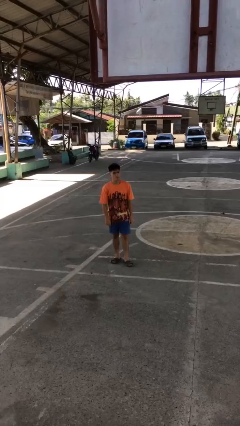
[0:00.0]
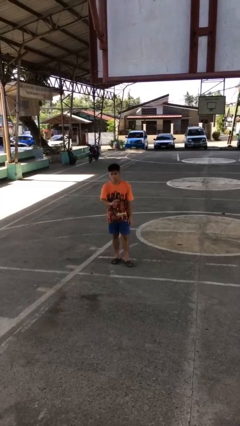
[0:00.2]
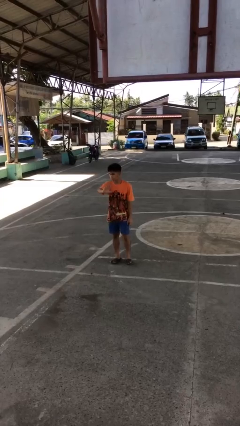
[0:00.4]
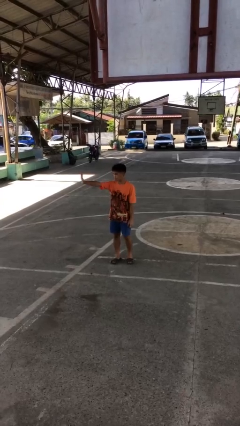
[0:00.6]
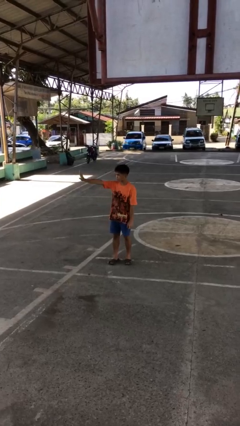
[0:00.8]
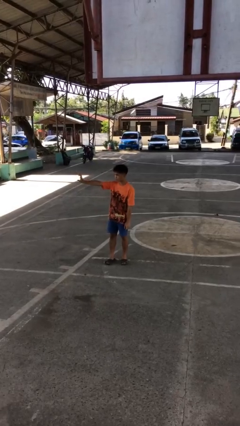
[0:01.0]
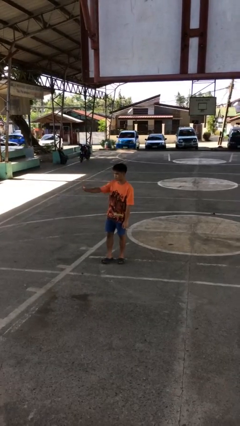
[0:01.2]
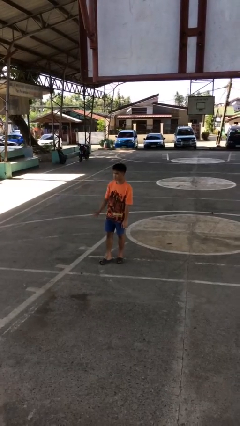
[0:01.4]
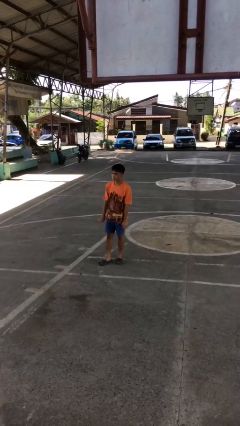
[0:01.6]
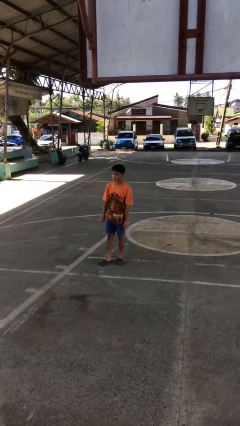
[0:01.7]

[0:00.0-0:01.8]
person gestures swipe right

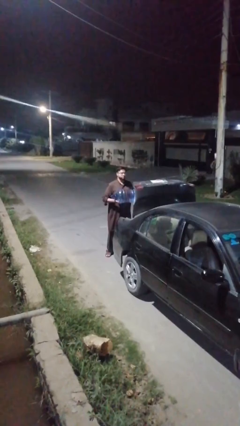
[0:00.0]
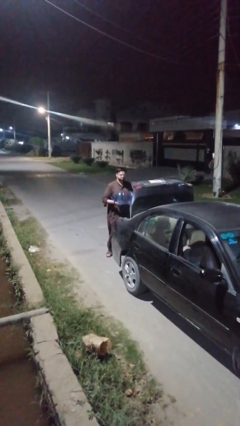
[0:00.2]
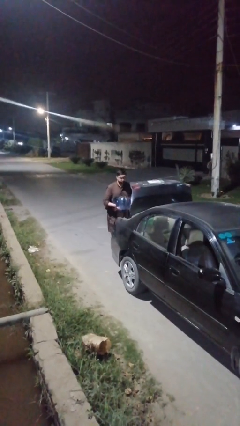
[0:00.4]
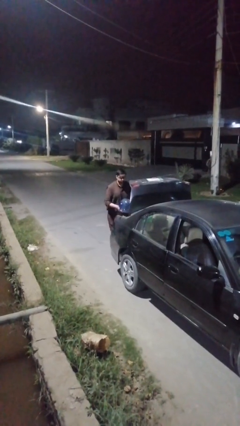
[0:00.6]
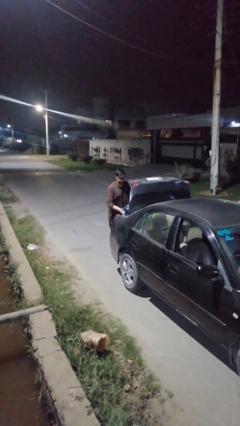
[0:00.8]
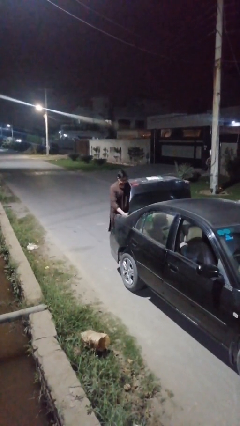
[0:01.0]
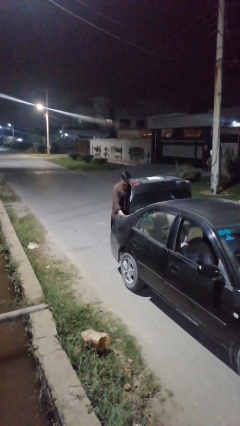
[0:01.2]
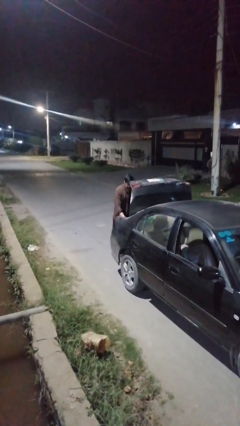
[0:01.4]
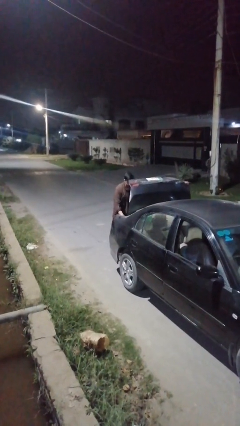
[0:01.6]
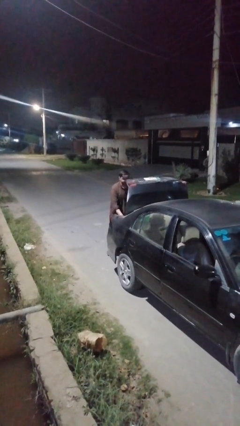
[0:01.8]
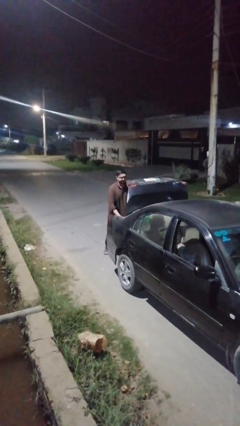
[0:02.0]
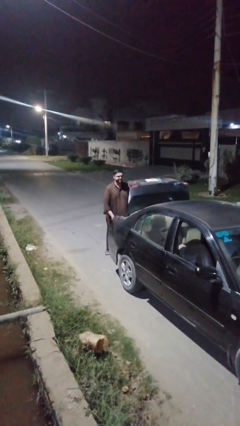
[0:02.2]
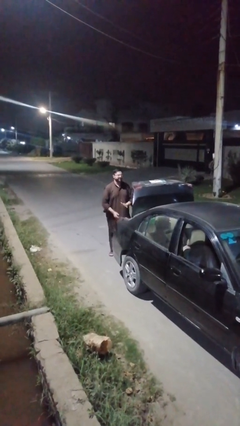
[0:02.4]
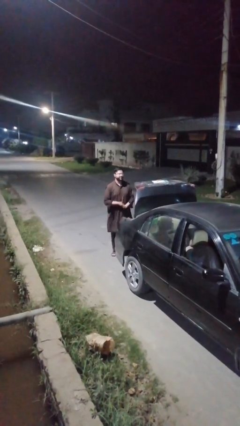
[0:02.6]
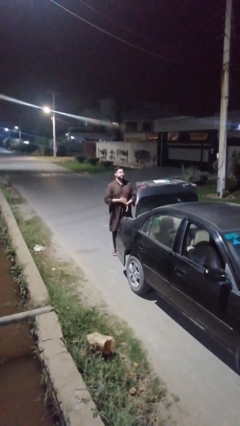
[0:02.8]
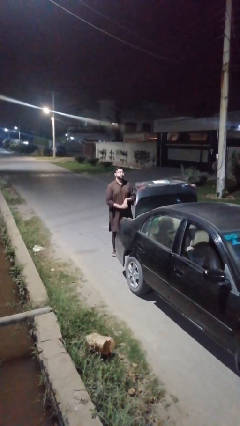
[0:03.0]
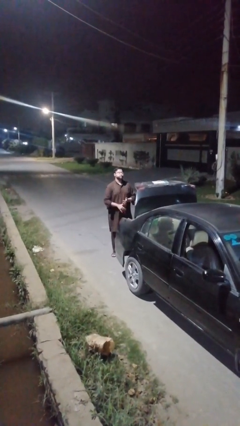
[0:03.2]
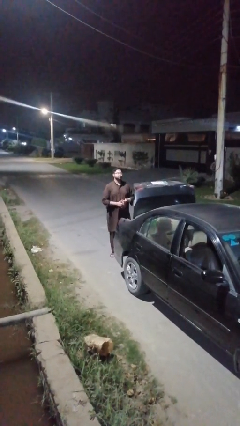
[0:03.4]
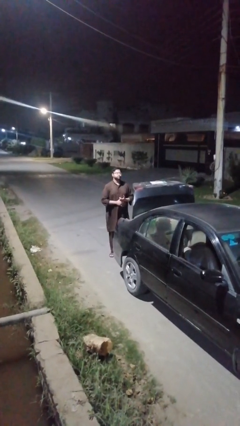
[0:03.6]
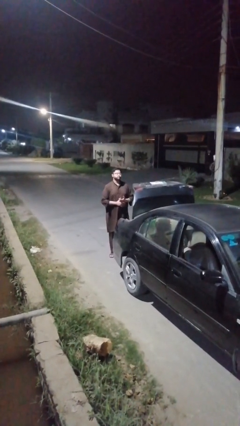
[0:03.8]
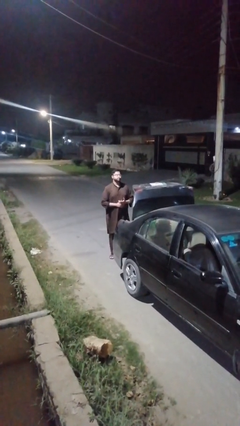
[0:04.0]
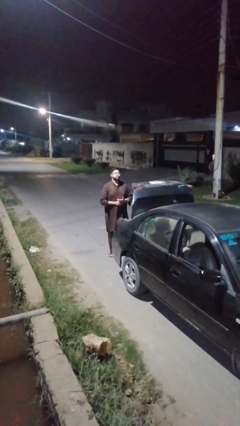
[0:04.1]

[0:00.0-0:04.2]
person loads car

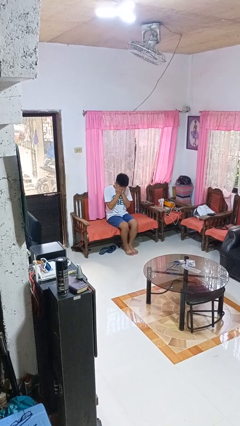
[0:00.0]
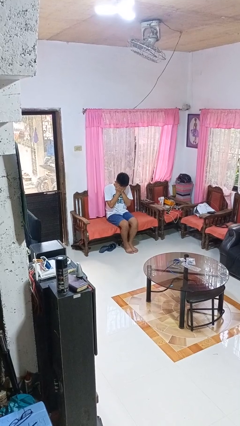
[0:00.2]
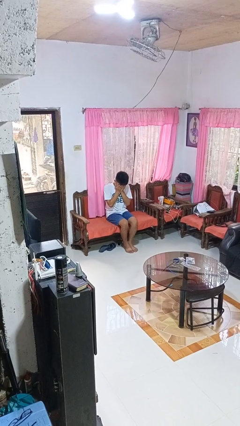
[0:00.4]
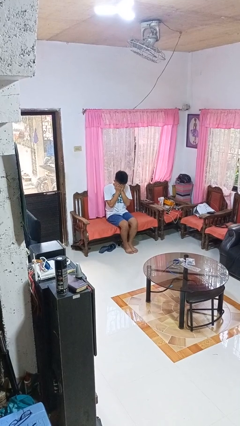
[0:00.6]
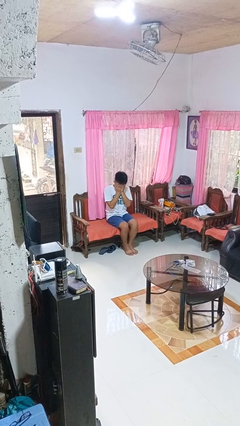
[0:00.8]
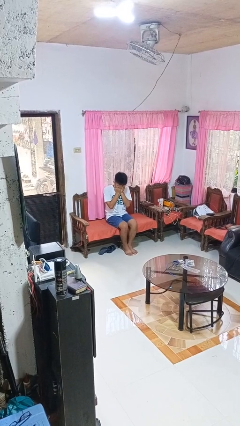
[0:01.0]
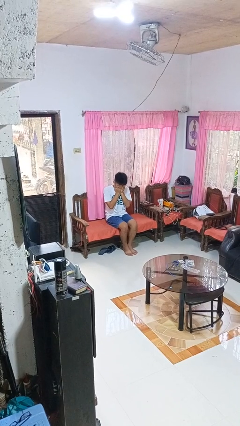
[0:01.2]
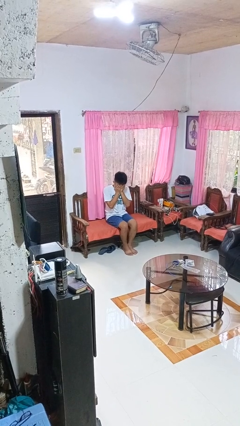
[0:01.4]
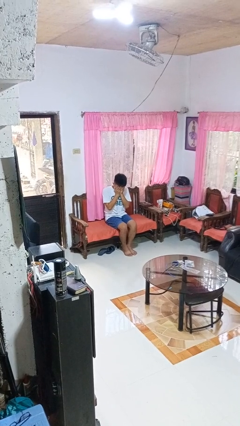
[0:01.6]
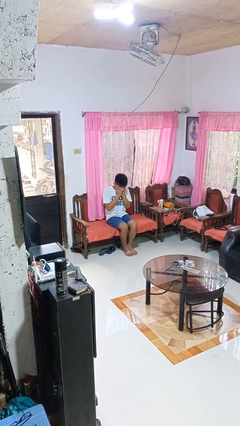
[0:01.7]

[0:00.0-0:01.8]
person covers face with hands

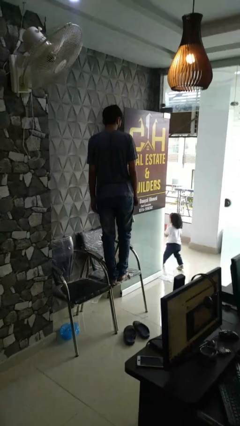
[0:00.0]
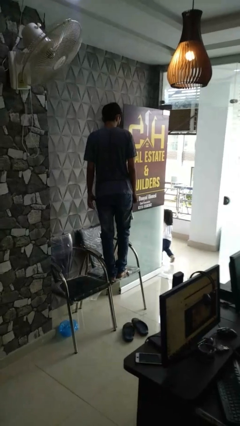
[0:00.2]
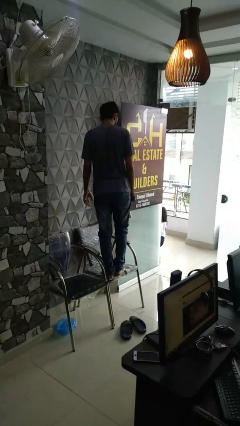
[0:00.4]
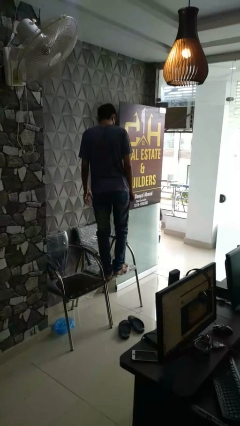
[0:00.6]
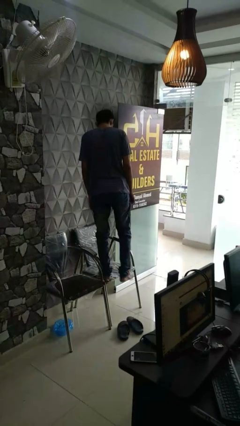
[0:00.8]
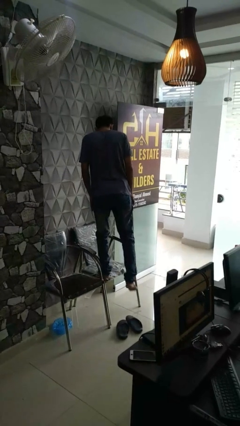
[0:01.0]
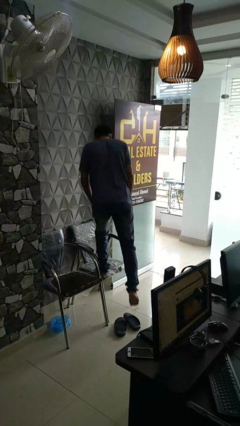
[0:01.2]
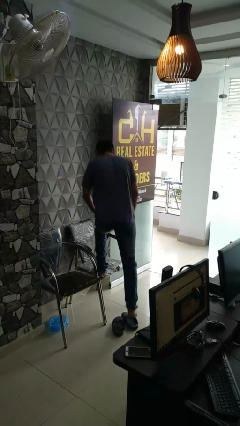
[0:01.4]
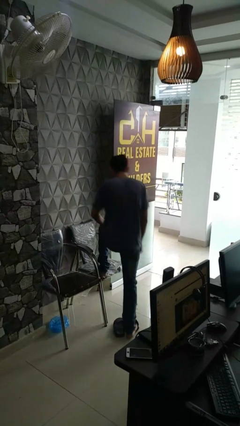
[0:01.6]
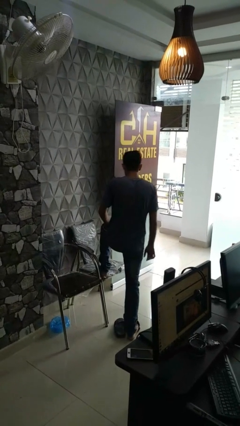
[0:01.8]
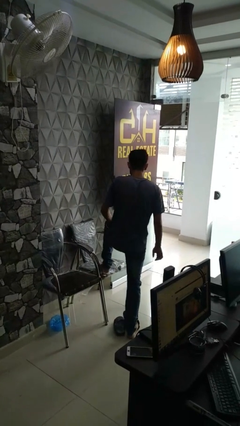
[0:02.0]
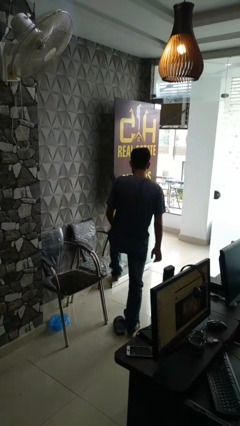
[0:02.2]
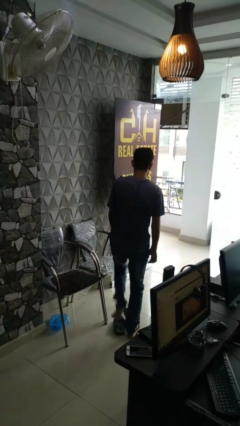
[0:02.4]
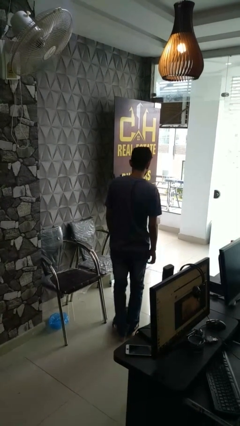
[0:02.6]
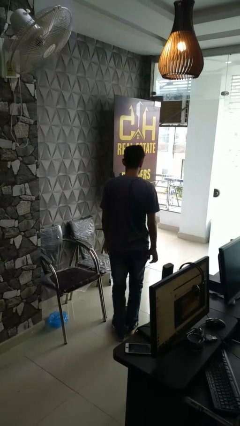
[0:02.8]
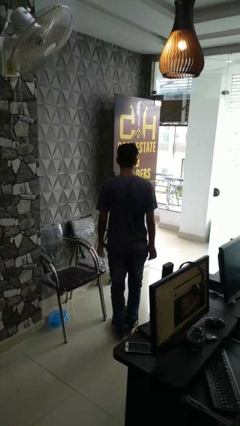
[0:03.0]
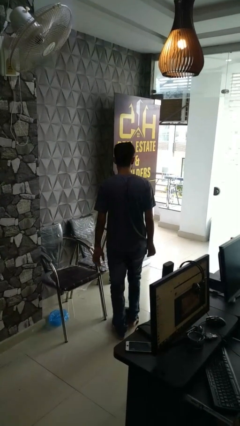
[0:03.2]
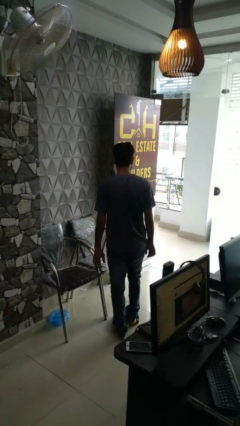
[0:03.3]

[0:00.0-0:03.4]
person climbs off chair

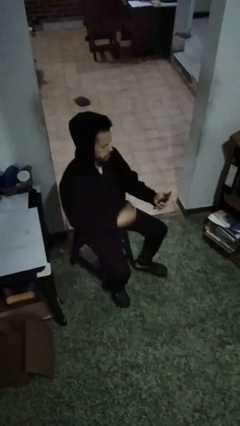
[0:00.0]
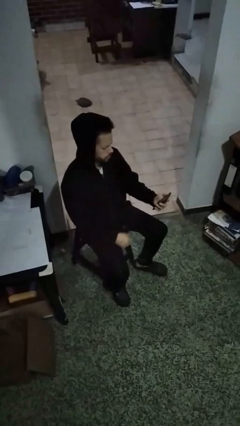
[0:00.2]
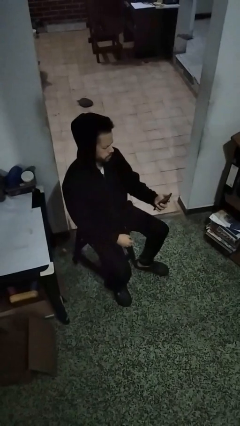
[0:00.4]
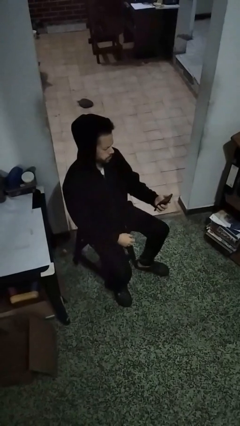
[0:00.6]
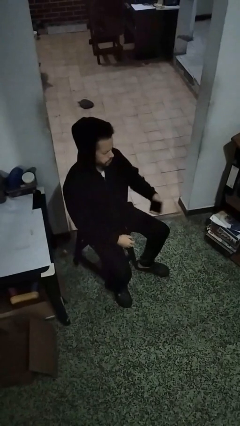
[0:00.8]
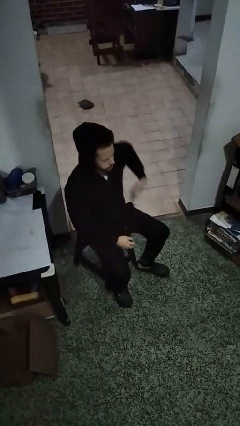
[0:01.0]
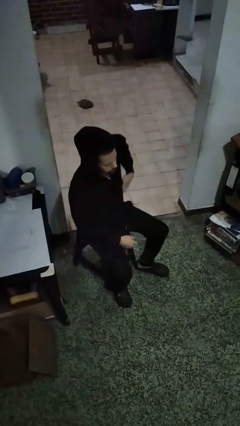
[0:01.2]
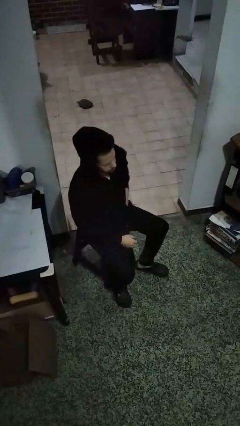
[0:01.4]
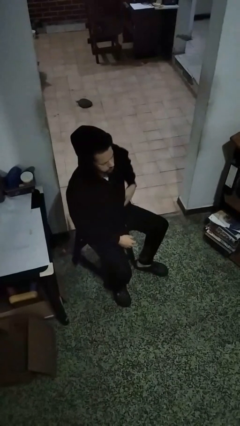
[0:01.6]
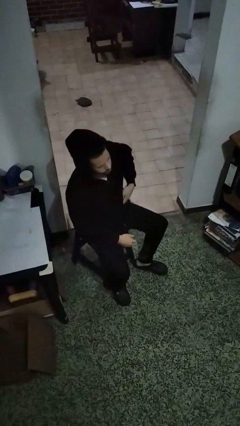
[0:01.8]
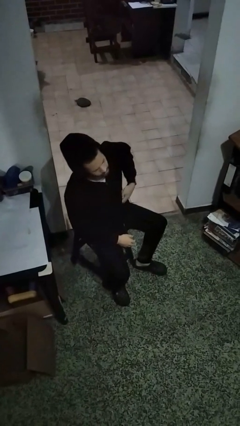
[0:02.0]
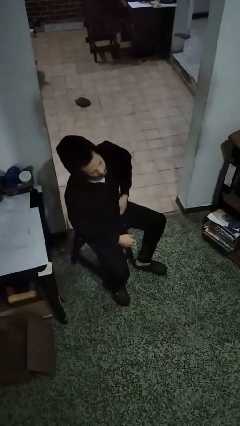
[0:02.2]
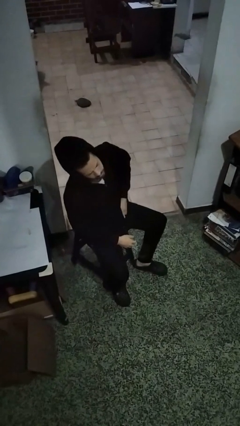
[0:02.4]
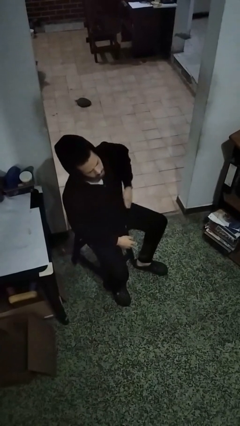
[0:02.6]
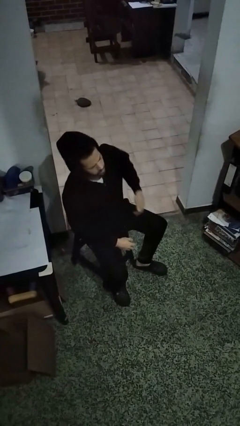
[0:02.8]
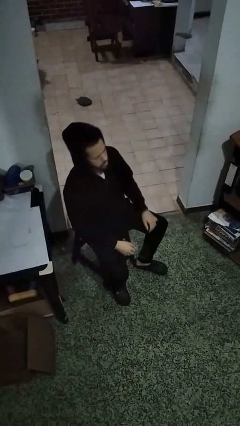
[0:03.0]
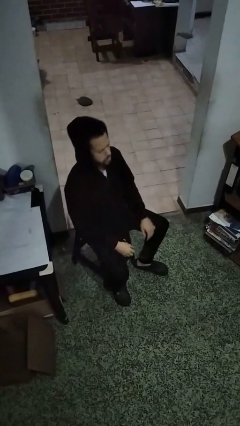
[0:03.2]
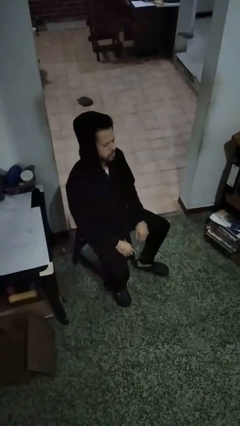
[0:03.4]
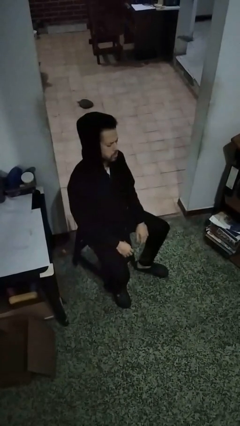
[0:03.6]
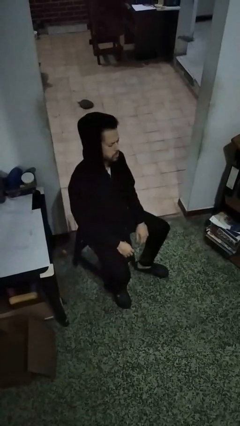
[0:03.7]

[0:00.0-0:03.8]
person puts phone into pocket

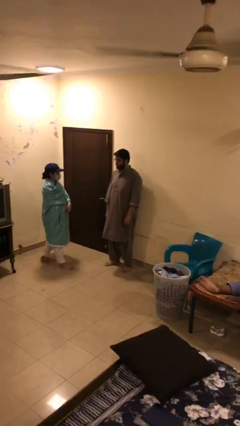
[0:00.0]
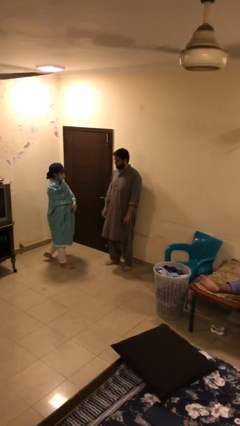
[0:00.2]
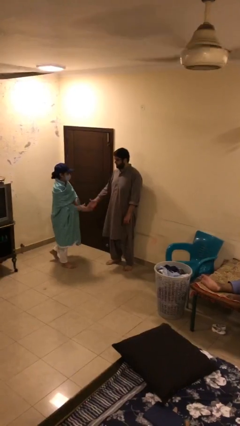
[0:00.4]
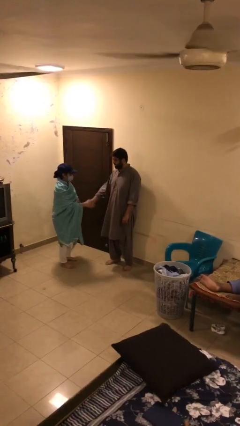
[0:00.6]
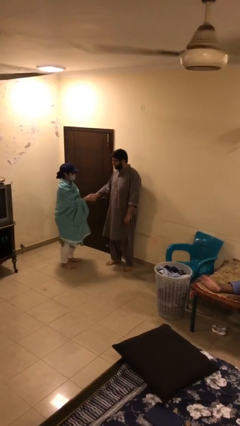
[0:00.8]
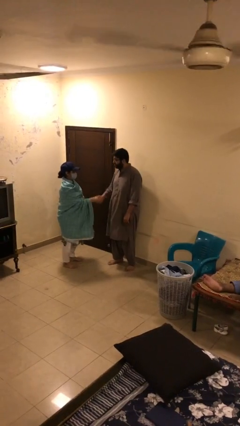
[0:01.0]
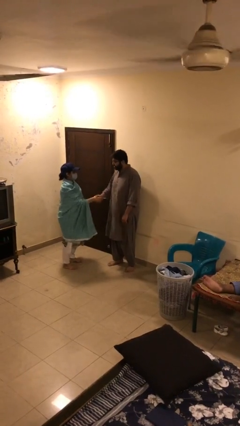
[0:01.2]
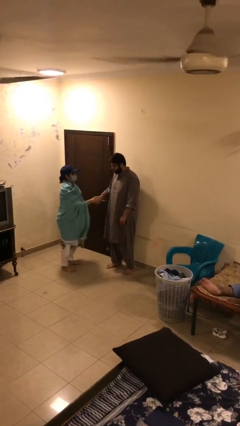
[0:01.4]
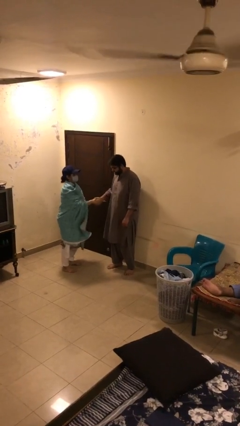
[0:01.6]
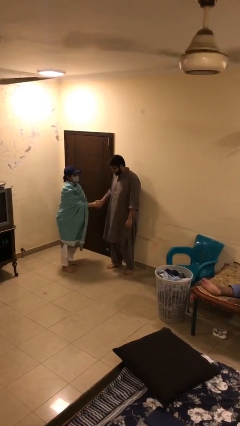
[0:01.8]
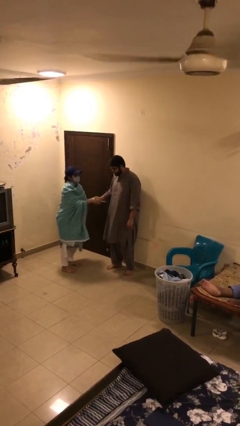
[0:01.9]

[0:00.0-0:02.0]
person shakes hand
